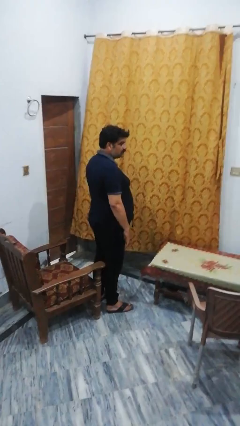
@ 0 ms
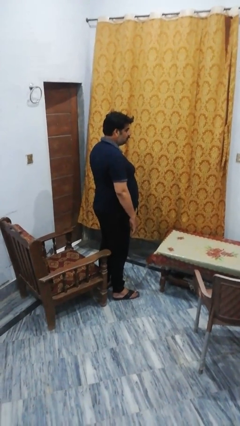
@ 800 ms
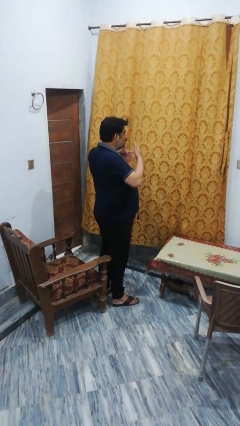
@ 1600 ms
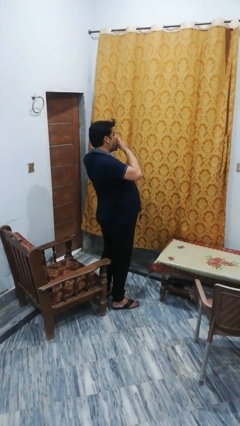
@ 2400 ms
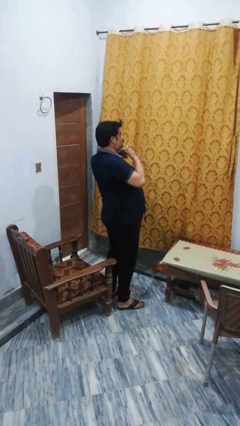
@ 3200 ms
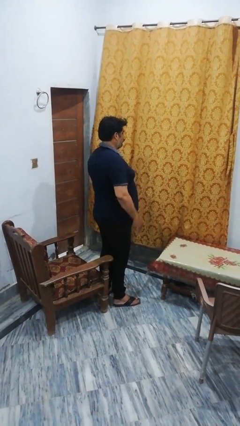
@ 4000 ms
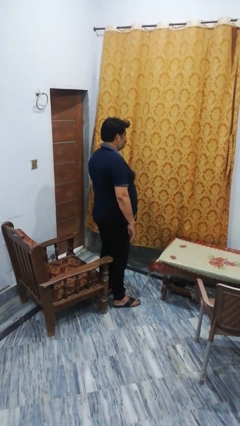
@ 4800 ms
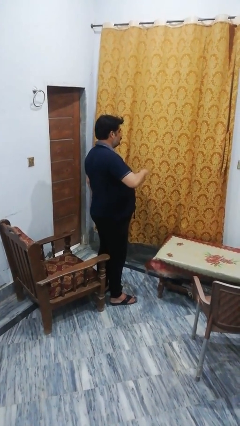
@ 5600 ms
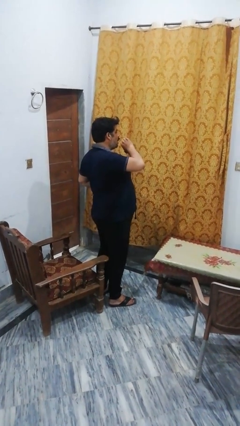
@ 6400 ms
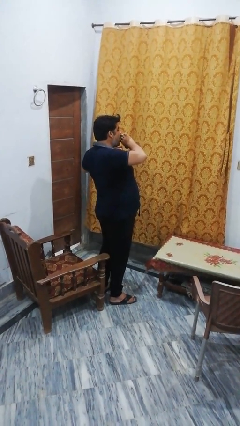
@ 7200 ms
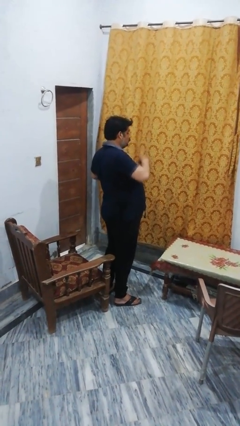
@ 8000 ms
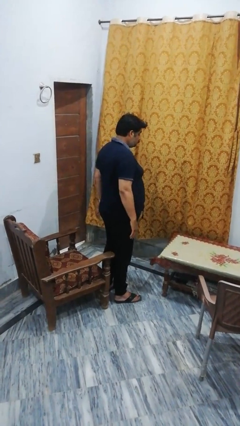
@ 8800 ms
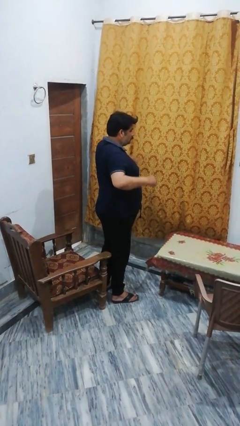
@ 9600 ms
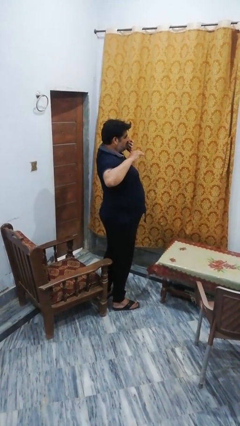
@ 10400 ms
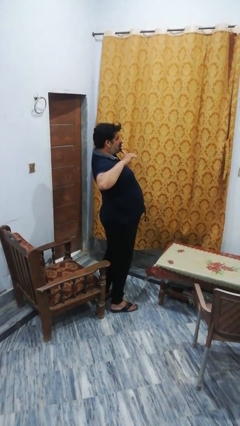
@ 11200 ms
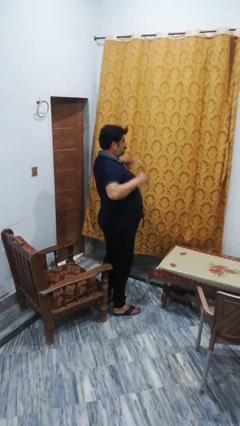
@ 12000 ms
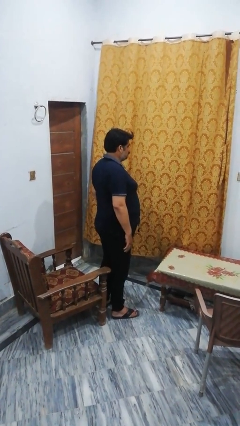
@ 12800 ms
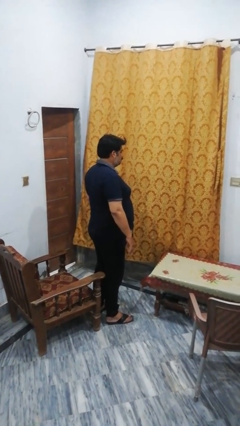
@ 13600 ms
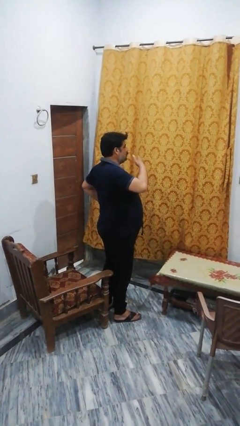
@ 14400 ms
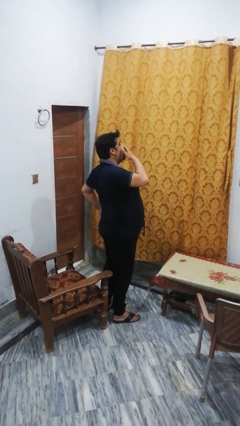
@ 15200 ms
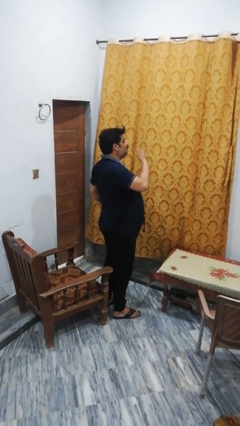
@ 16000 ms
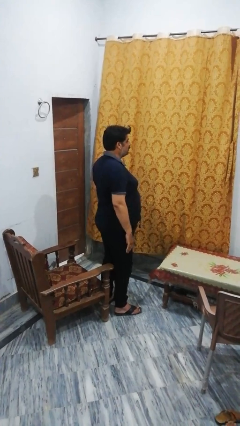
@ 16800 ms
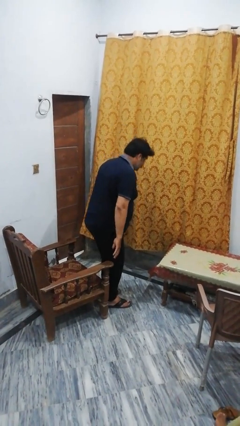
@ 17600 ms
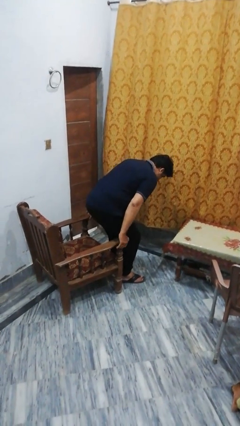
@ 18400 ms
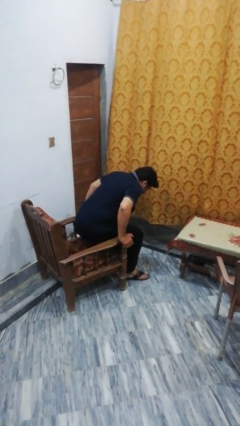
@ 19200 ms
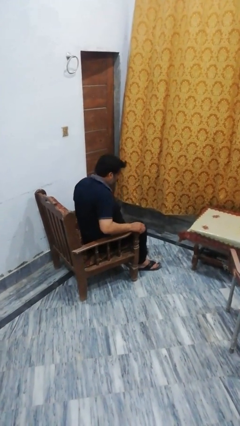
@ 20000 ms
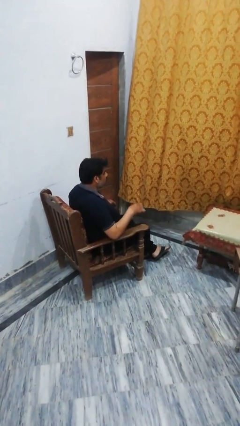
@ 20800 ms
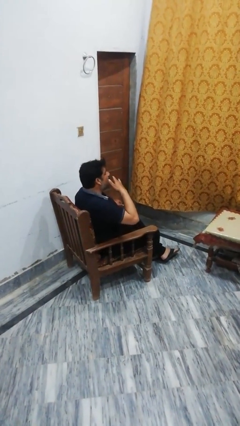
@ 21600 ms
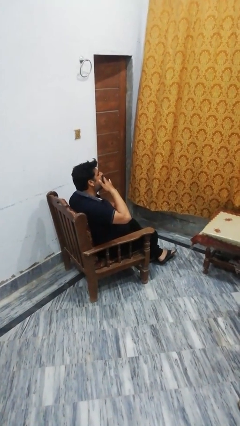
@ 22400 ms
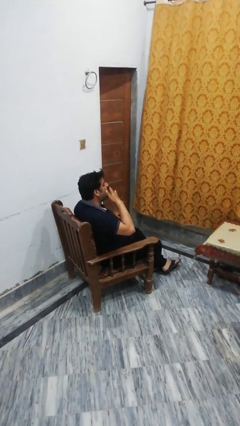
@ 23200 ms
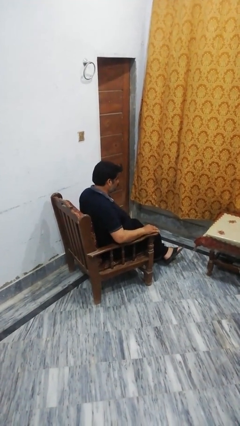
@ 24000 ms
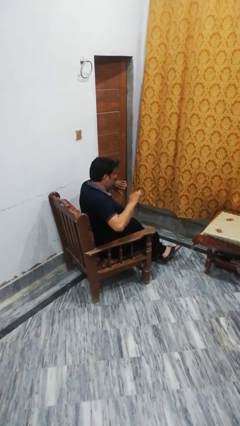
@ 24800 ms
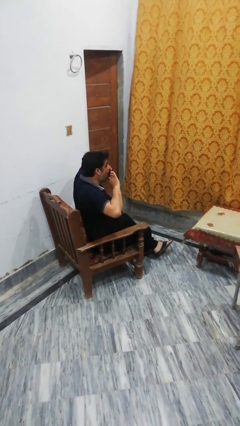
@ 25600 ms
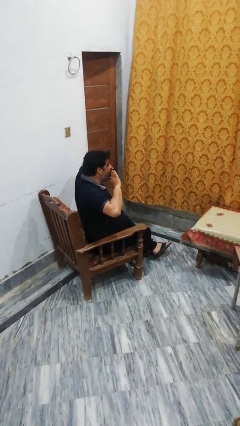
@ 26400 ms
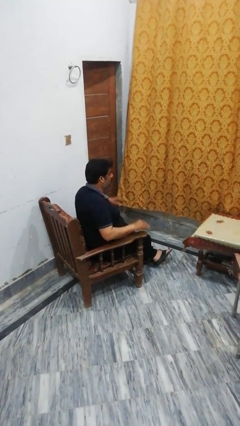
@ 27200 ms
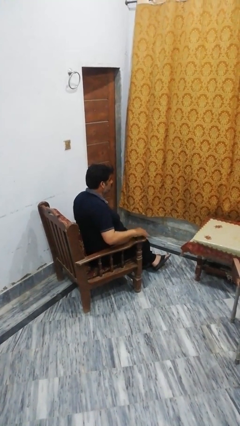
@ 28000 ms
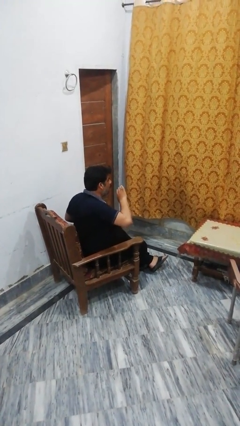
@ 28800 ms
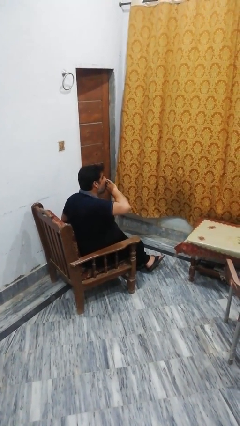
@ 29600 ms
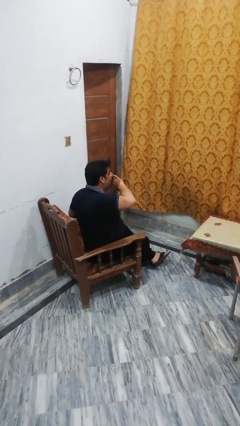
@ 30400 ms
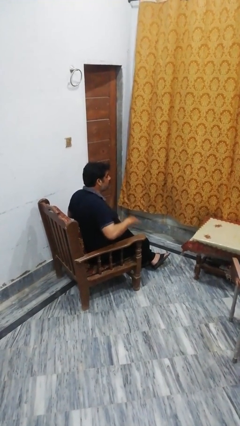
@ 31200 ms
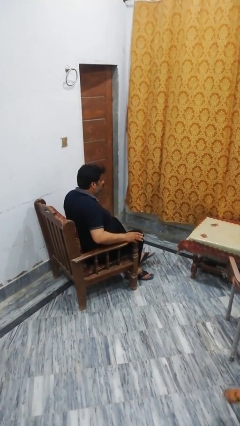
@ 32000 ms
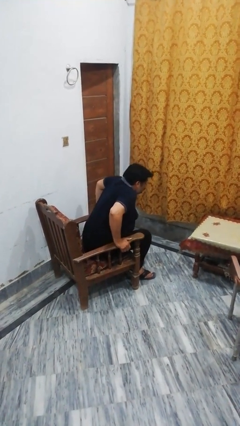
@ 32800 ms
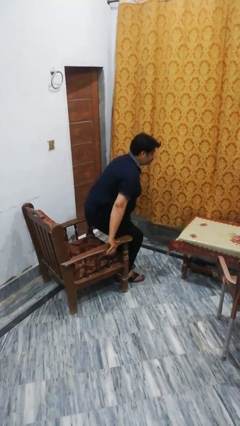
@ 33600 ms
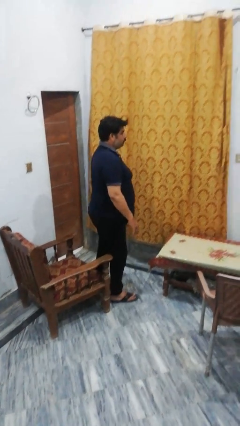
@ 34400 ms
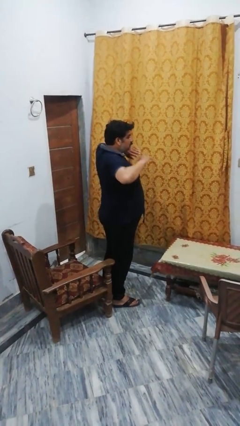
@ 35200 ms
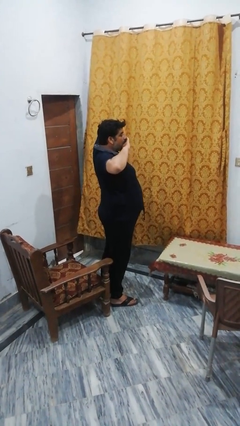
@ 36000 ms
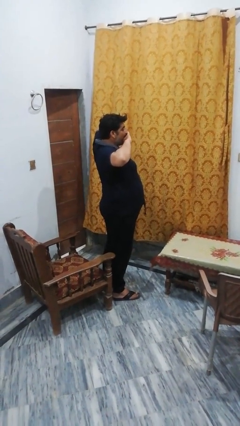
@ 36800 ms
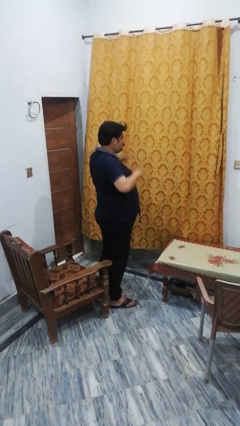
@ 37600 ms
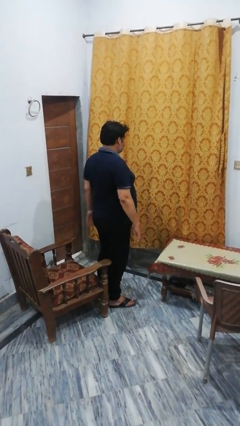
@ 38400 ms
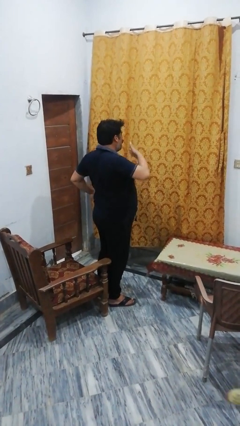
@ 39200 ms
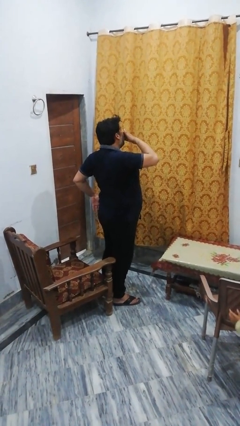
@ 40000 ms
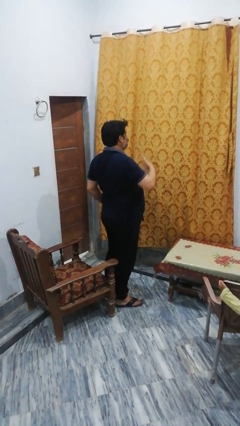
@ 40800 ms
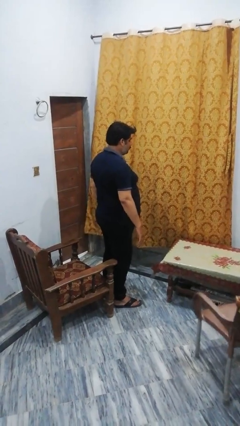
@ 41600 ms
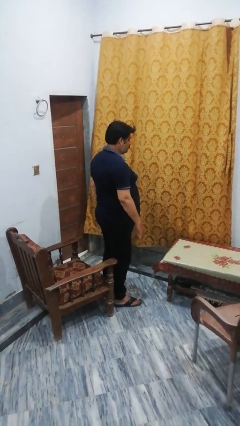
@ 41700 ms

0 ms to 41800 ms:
person yawns

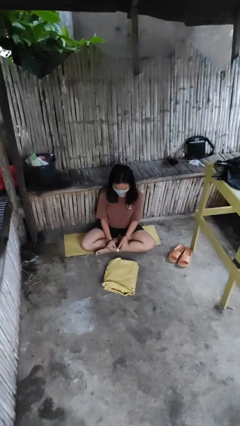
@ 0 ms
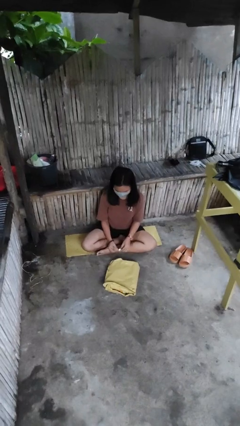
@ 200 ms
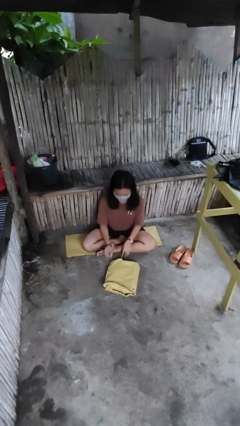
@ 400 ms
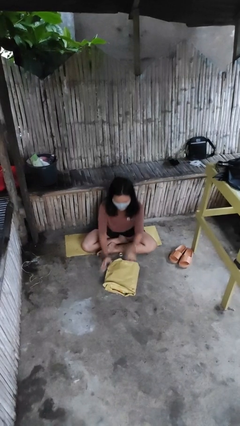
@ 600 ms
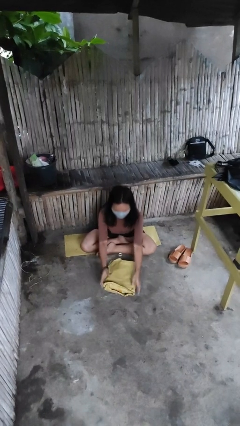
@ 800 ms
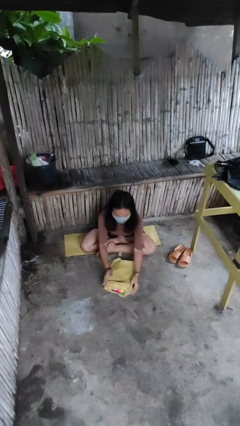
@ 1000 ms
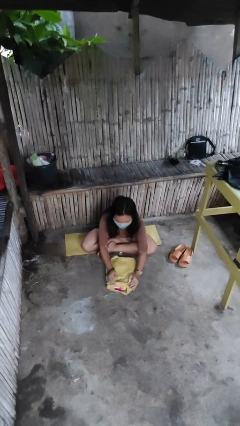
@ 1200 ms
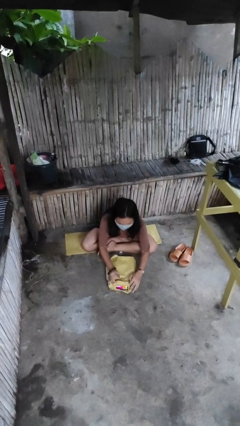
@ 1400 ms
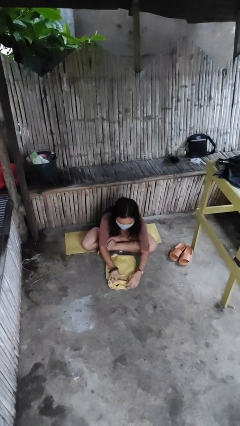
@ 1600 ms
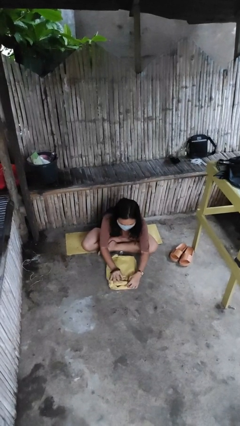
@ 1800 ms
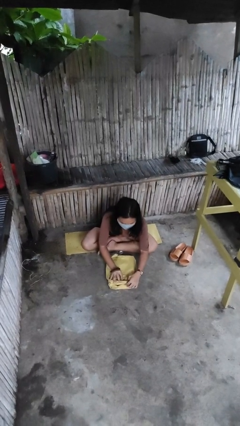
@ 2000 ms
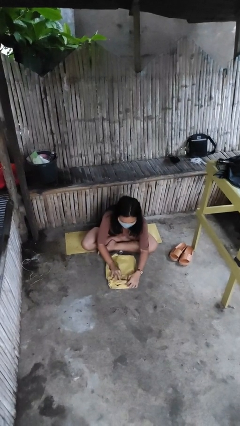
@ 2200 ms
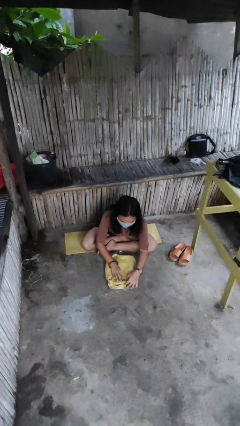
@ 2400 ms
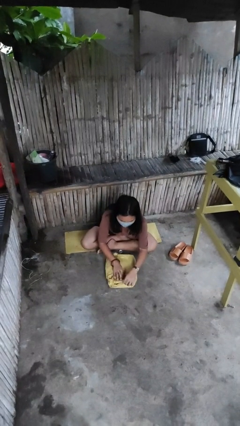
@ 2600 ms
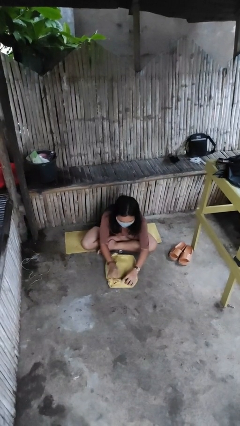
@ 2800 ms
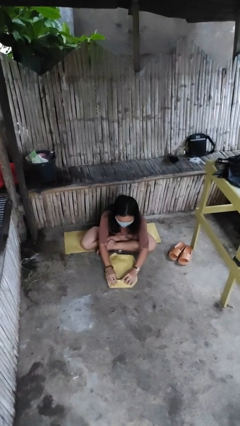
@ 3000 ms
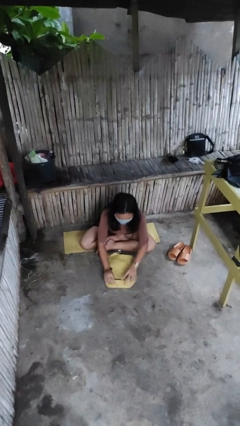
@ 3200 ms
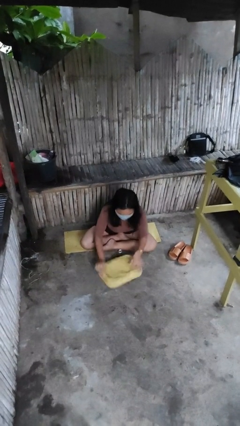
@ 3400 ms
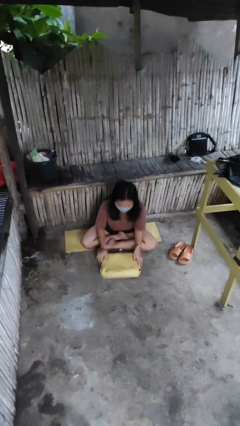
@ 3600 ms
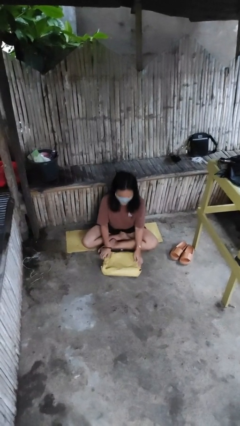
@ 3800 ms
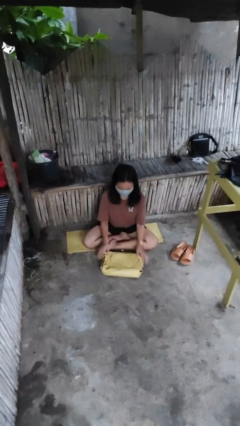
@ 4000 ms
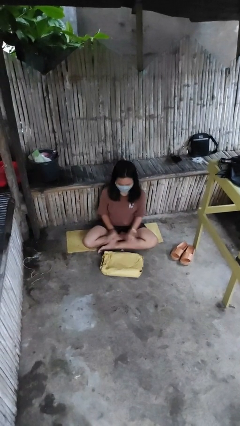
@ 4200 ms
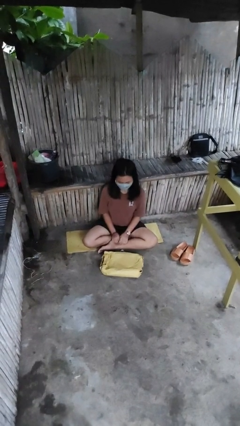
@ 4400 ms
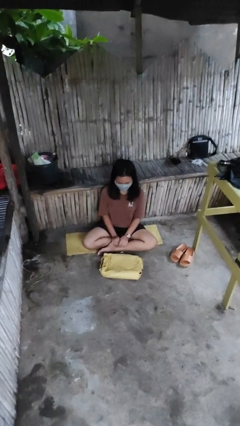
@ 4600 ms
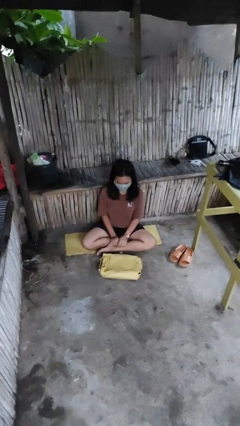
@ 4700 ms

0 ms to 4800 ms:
person wraps box

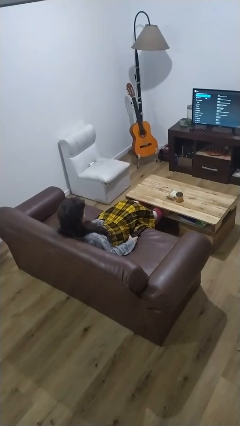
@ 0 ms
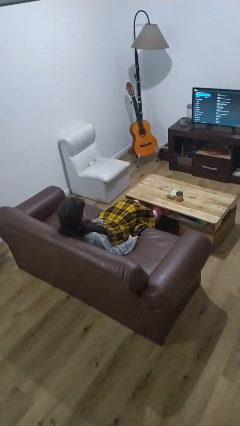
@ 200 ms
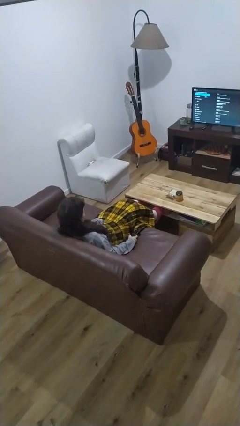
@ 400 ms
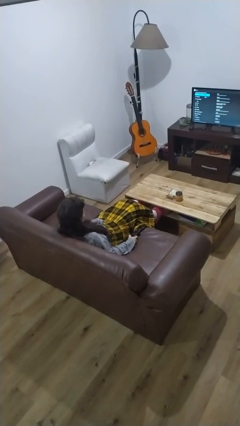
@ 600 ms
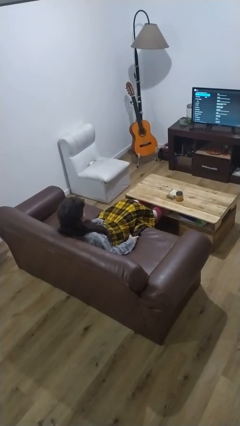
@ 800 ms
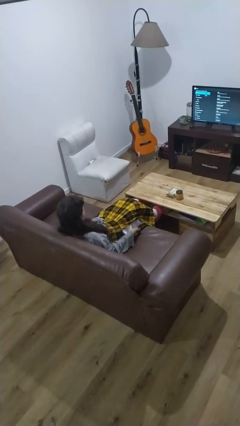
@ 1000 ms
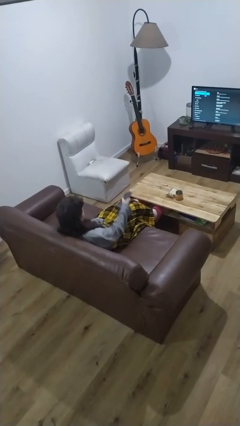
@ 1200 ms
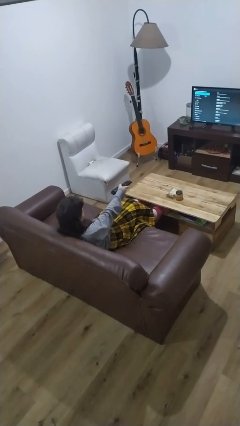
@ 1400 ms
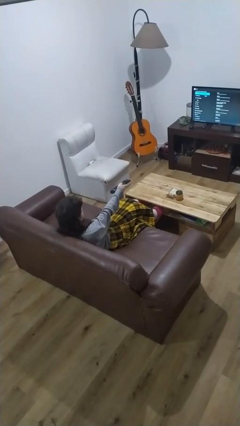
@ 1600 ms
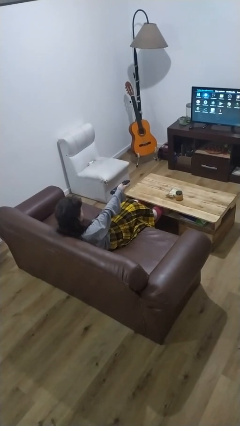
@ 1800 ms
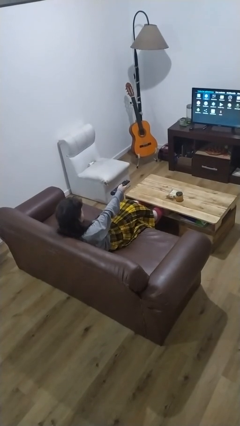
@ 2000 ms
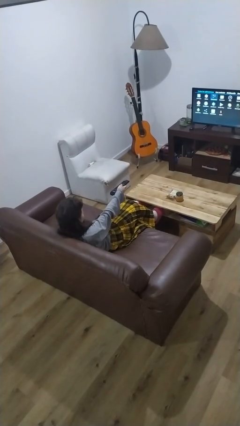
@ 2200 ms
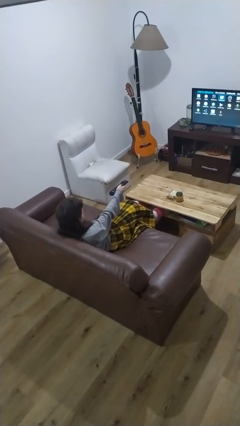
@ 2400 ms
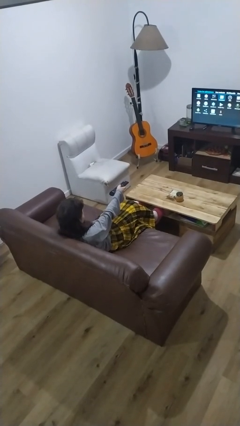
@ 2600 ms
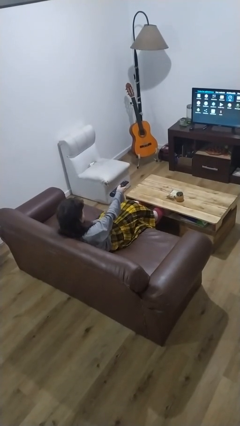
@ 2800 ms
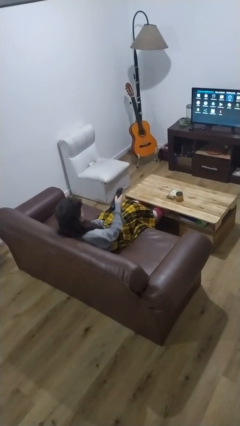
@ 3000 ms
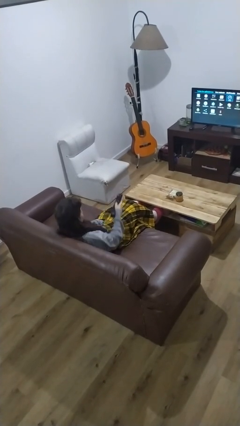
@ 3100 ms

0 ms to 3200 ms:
person uses television remote
